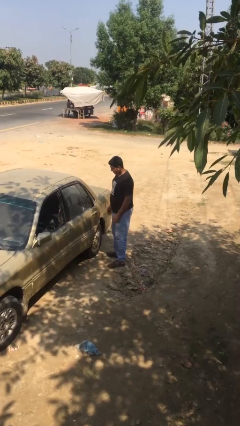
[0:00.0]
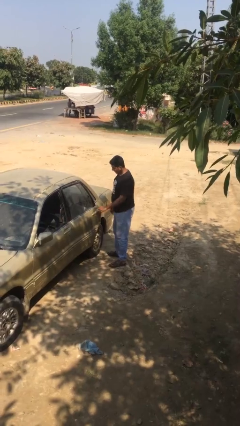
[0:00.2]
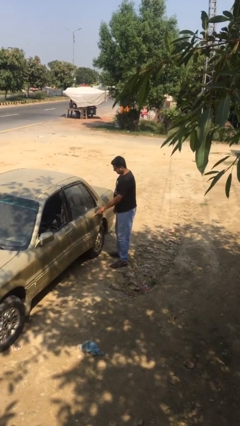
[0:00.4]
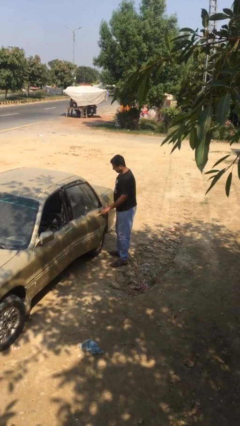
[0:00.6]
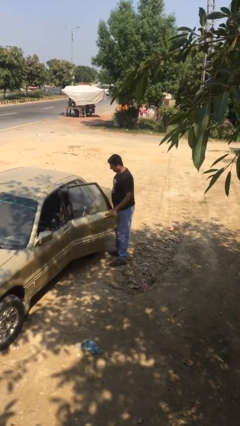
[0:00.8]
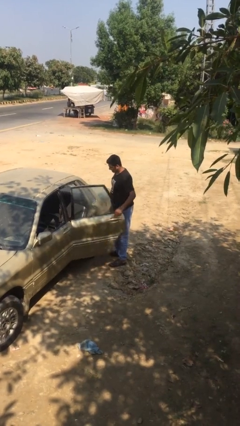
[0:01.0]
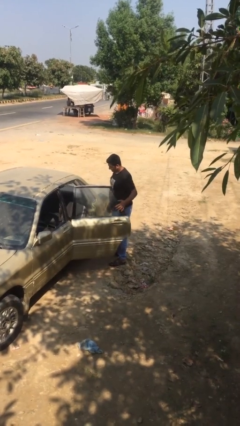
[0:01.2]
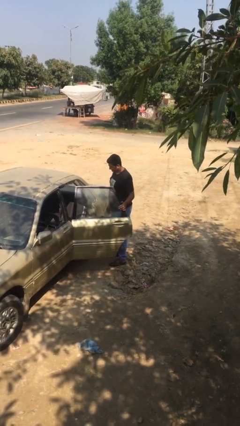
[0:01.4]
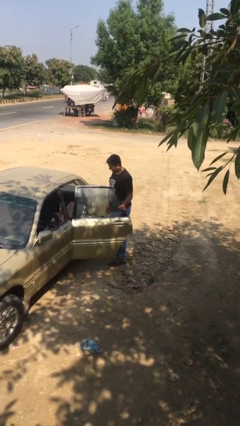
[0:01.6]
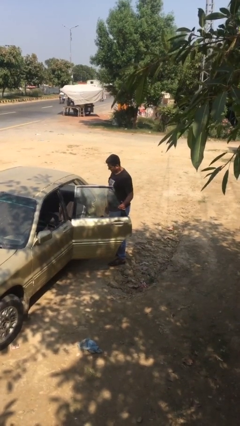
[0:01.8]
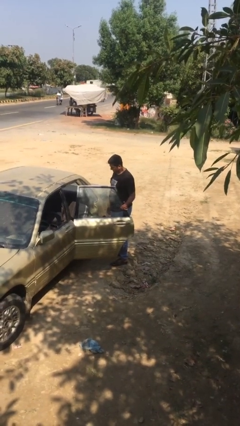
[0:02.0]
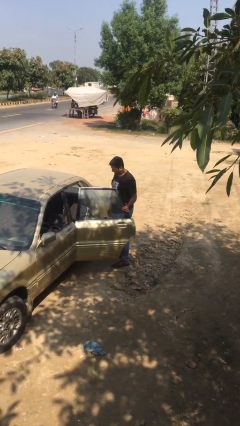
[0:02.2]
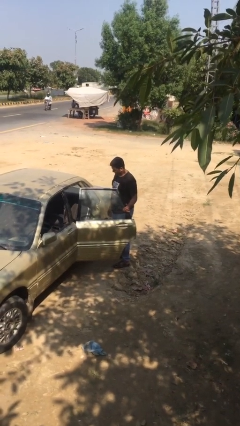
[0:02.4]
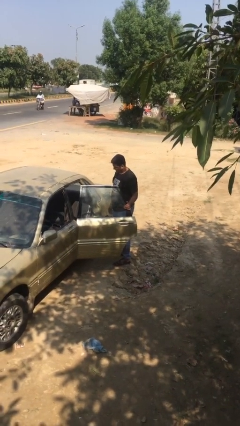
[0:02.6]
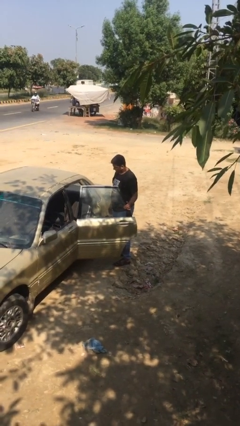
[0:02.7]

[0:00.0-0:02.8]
person opens car door

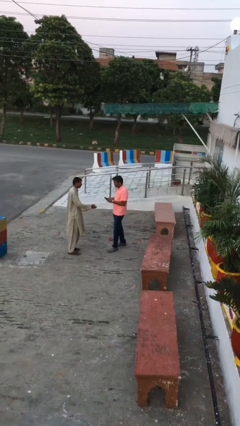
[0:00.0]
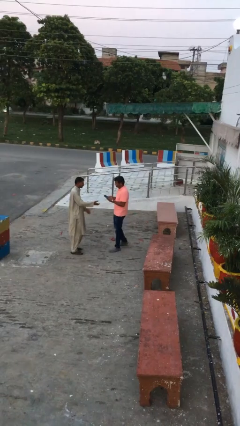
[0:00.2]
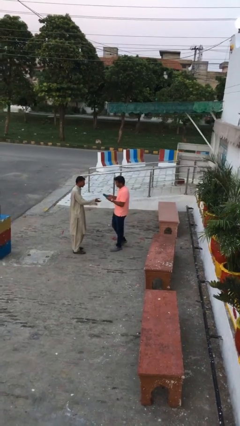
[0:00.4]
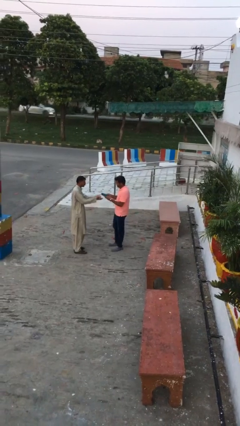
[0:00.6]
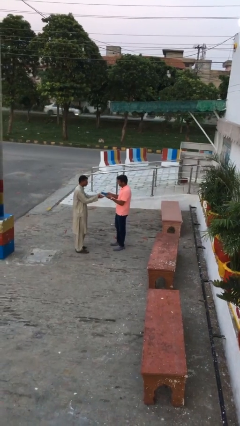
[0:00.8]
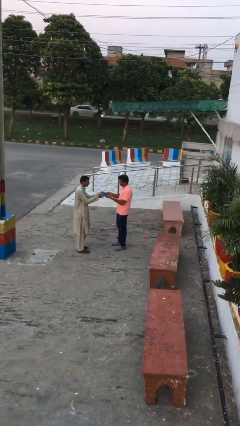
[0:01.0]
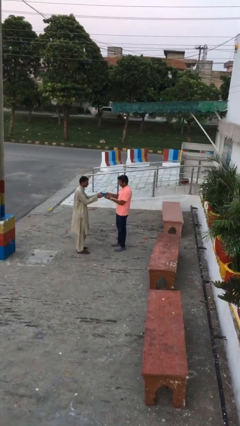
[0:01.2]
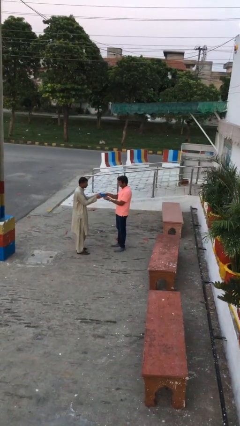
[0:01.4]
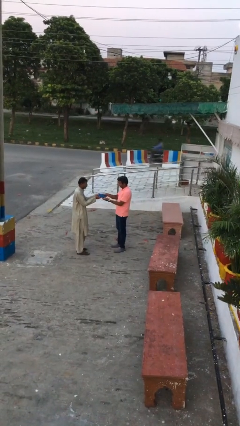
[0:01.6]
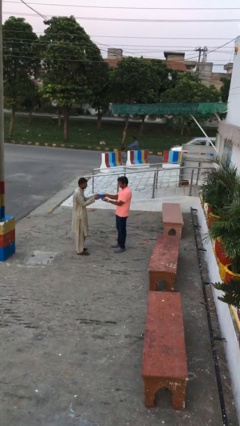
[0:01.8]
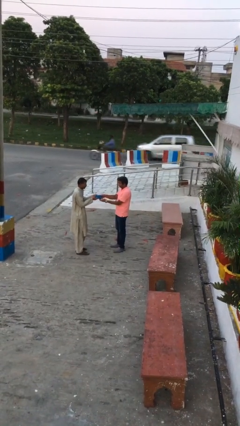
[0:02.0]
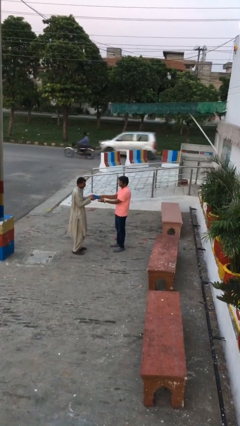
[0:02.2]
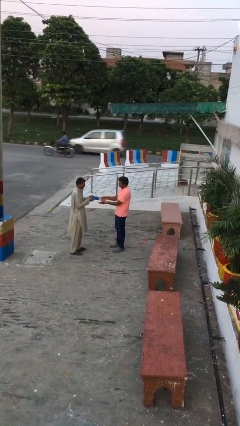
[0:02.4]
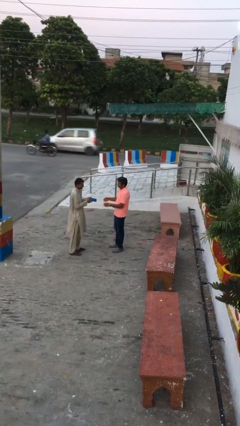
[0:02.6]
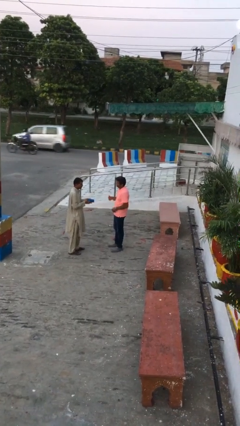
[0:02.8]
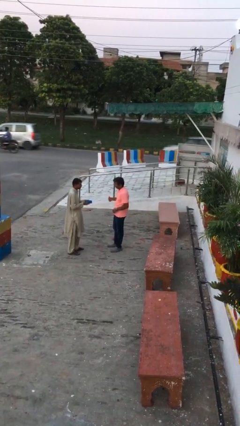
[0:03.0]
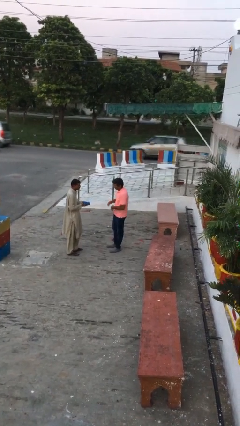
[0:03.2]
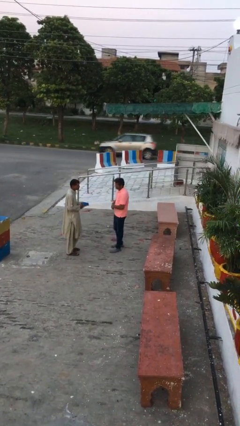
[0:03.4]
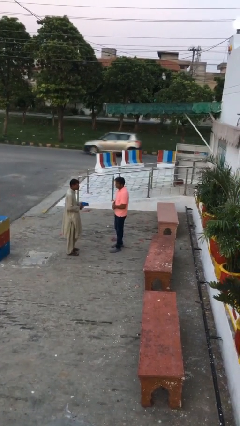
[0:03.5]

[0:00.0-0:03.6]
person transfers object to person

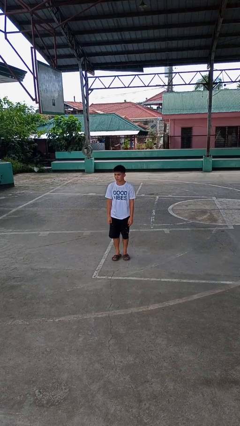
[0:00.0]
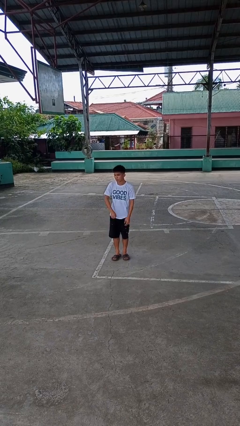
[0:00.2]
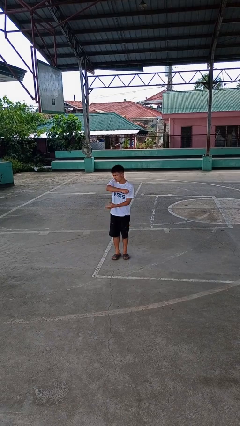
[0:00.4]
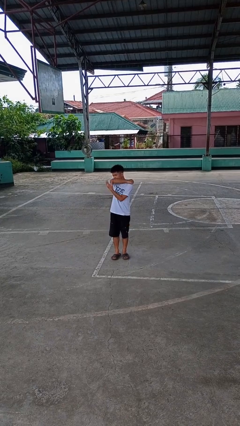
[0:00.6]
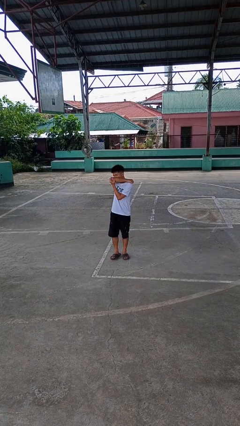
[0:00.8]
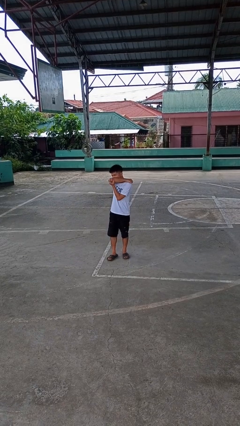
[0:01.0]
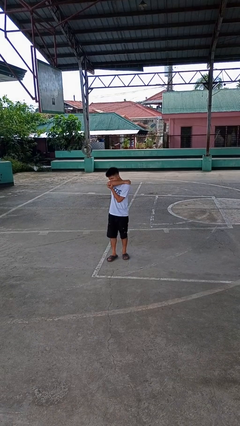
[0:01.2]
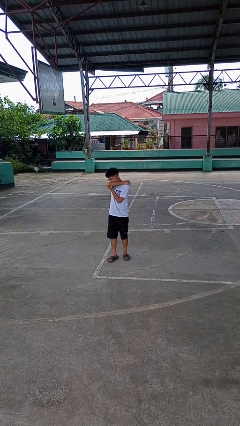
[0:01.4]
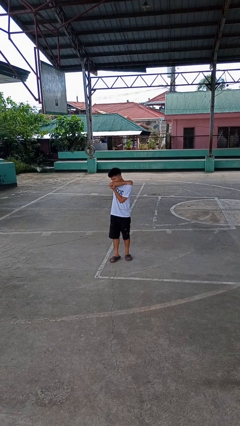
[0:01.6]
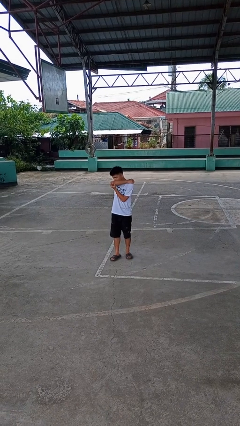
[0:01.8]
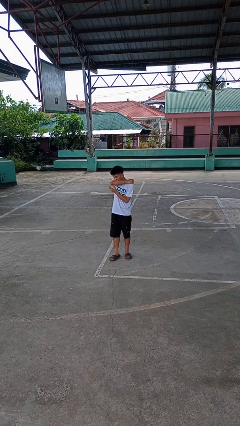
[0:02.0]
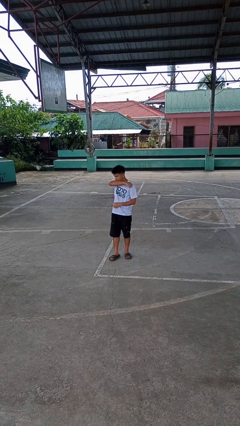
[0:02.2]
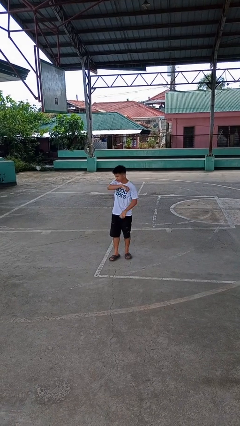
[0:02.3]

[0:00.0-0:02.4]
person sneezes into arm

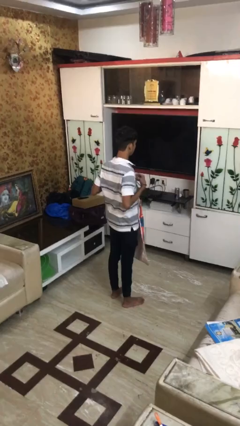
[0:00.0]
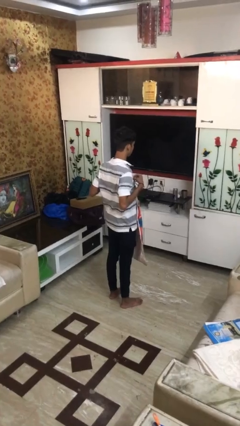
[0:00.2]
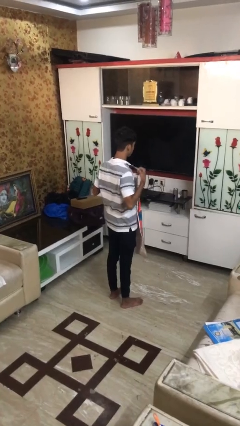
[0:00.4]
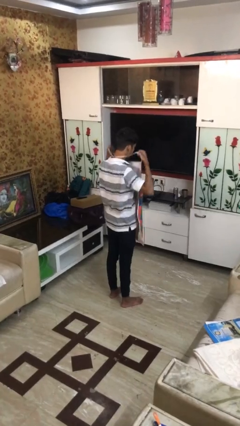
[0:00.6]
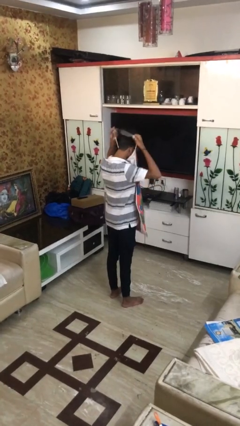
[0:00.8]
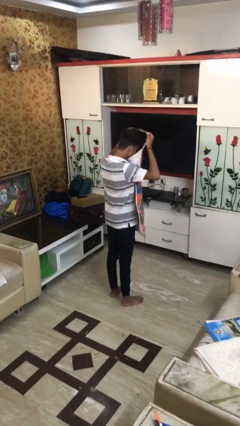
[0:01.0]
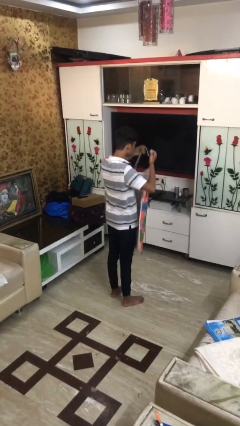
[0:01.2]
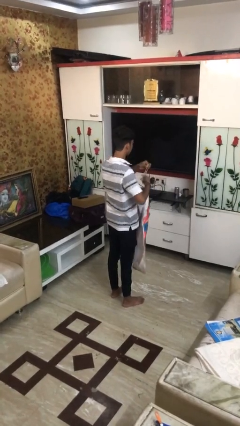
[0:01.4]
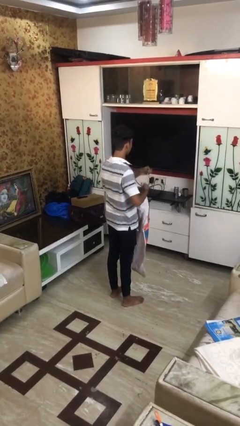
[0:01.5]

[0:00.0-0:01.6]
person takes off apron

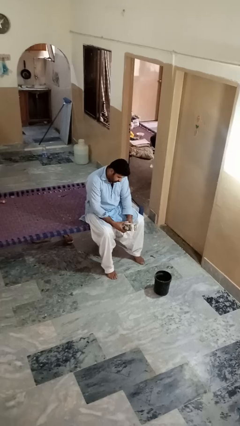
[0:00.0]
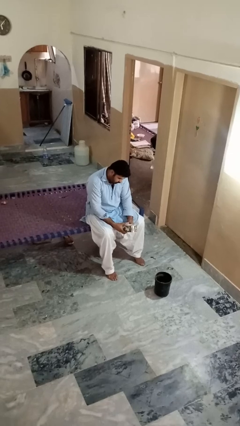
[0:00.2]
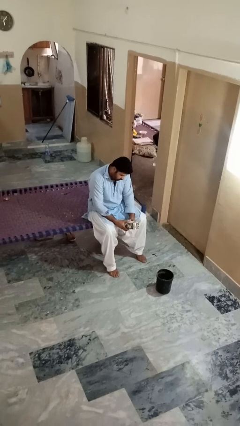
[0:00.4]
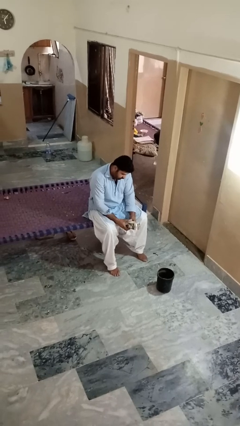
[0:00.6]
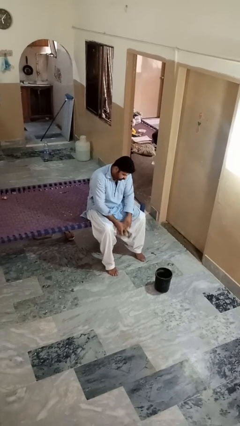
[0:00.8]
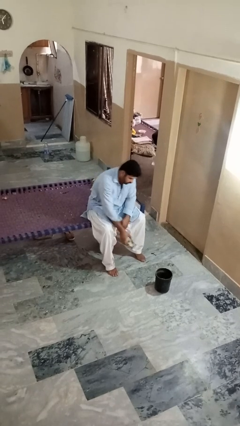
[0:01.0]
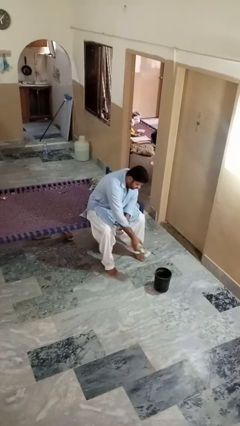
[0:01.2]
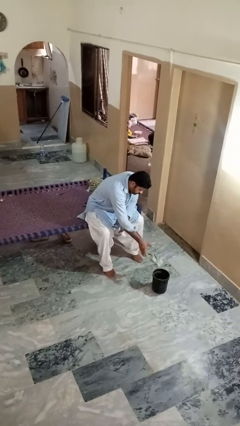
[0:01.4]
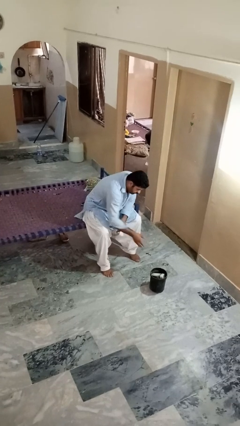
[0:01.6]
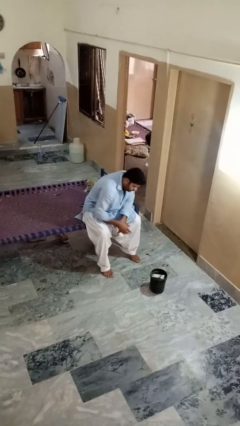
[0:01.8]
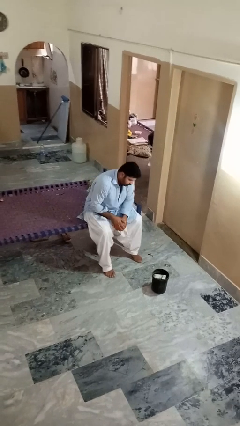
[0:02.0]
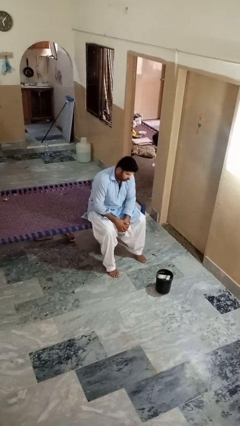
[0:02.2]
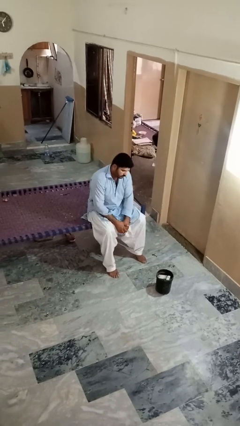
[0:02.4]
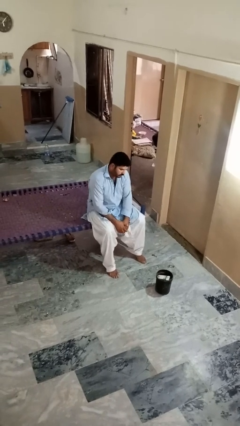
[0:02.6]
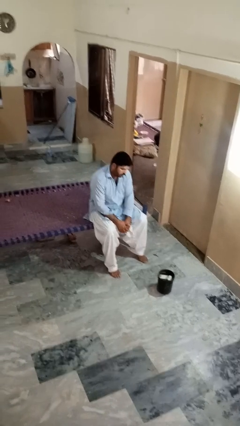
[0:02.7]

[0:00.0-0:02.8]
person puts object into basket

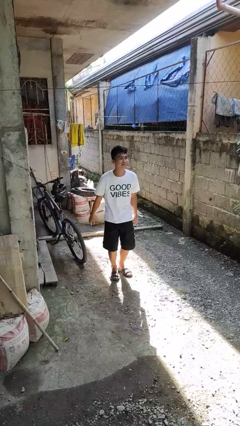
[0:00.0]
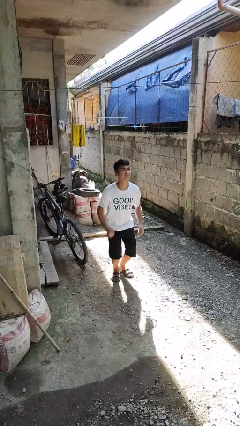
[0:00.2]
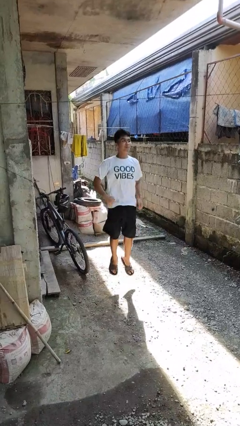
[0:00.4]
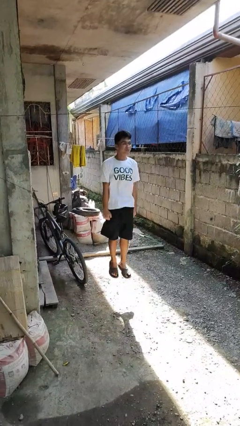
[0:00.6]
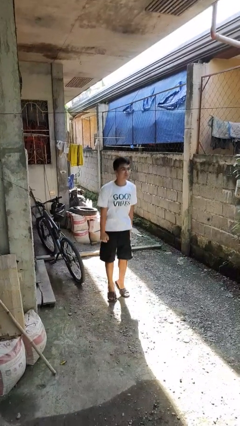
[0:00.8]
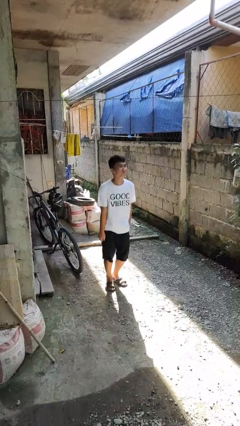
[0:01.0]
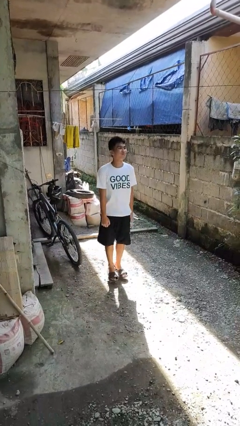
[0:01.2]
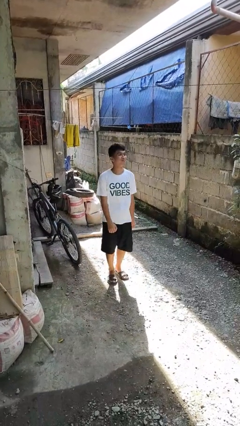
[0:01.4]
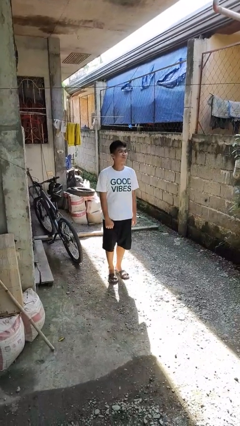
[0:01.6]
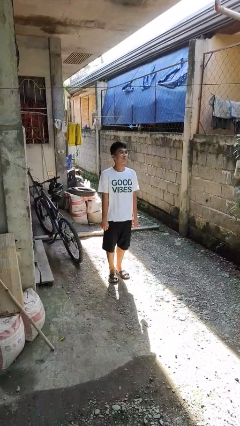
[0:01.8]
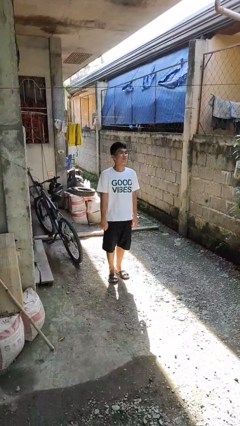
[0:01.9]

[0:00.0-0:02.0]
person jumps

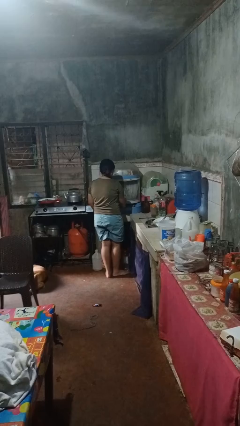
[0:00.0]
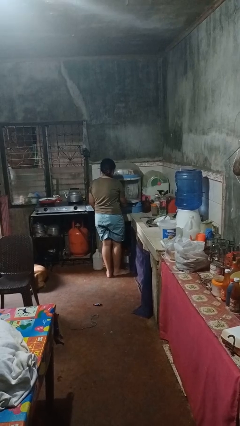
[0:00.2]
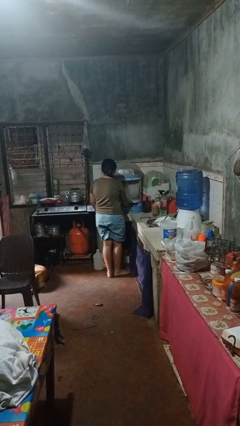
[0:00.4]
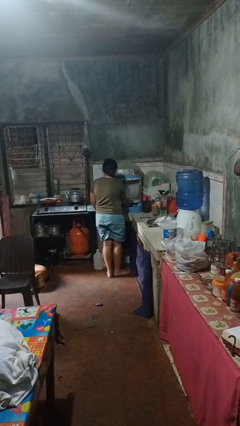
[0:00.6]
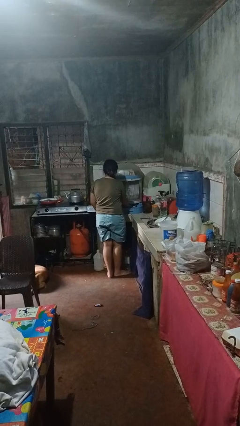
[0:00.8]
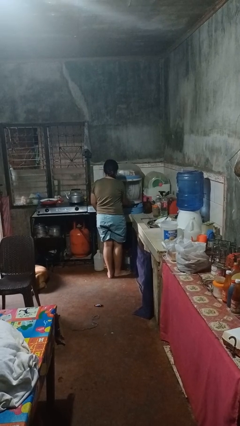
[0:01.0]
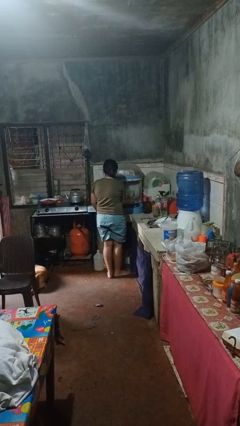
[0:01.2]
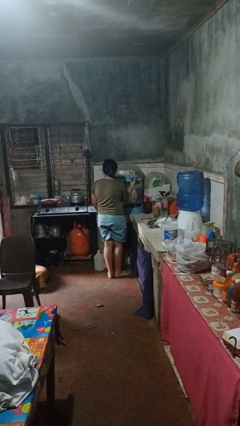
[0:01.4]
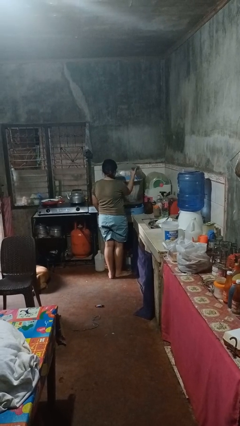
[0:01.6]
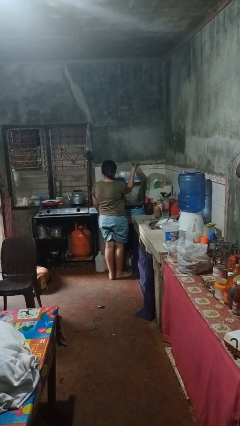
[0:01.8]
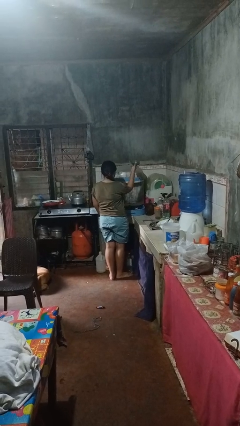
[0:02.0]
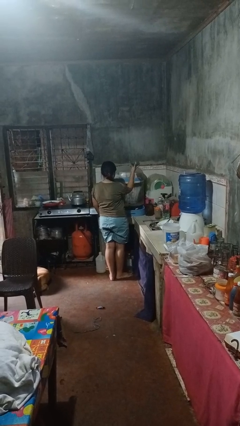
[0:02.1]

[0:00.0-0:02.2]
person takes object from kitchen drawer
